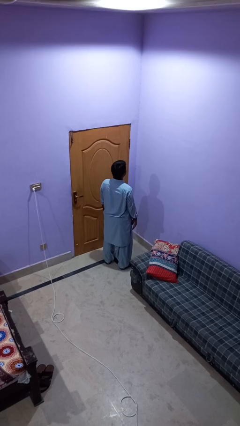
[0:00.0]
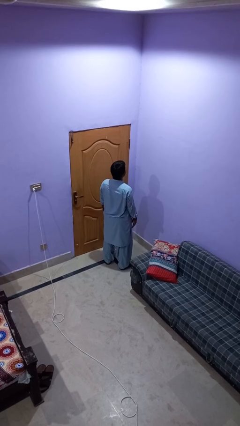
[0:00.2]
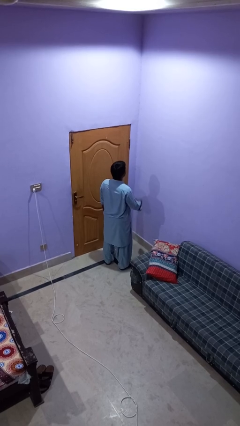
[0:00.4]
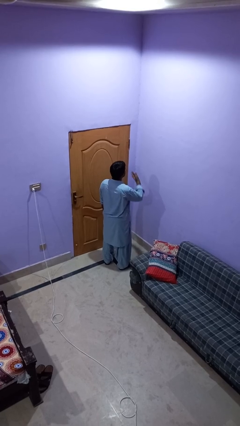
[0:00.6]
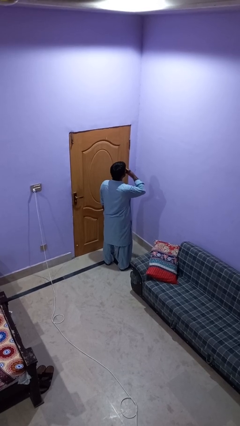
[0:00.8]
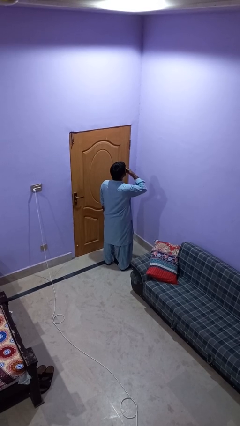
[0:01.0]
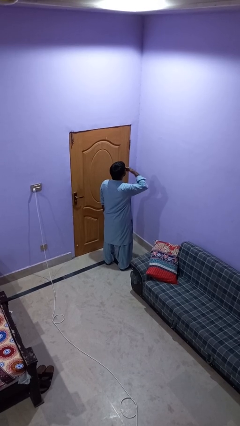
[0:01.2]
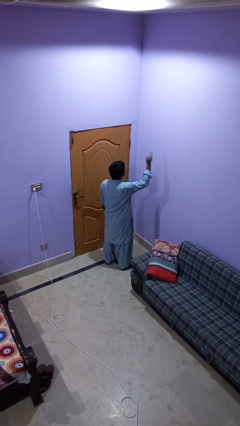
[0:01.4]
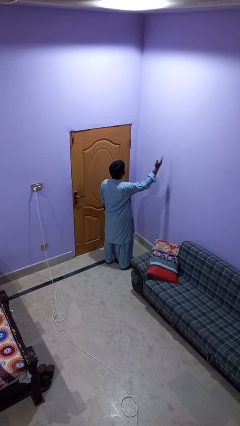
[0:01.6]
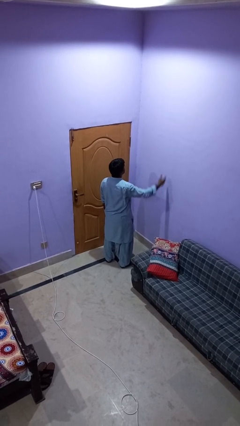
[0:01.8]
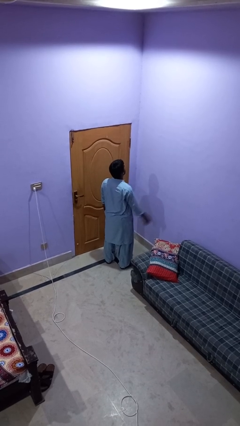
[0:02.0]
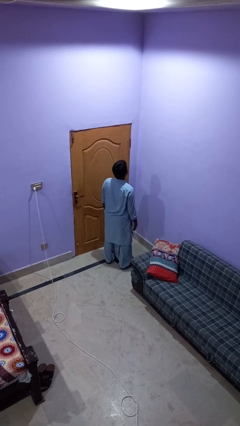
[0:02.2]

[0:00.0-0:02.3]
person gestures blow kiss

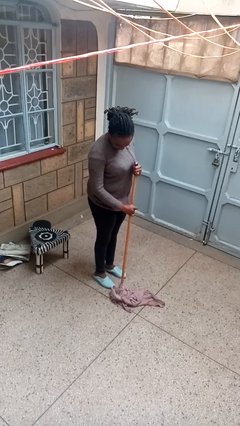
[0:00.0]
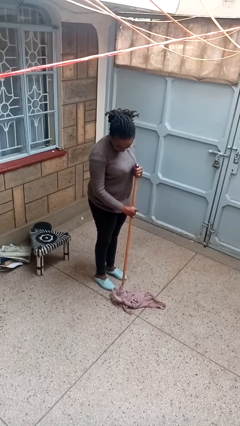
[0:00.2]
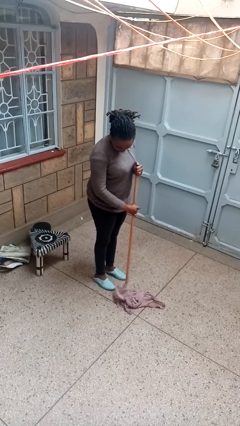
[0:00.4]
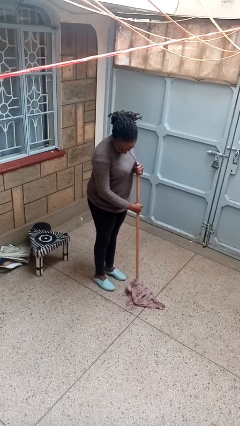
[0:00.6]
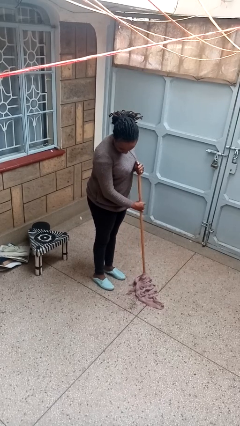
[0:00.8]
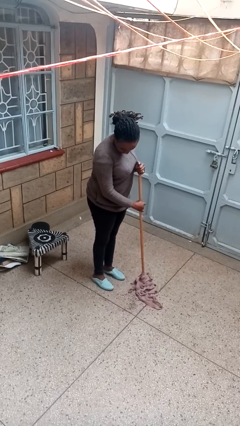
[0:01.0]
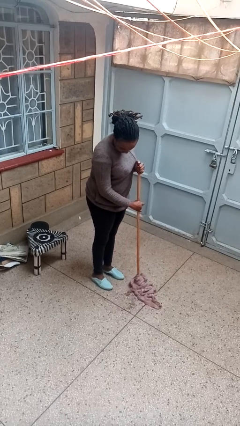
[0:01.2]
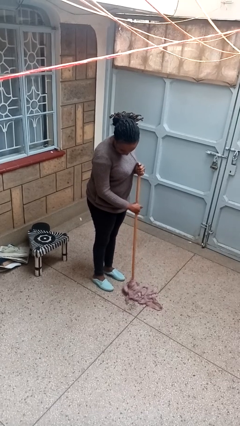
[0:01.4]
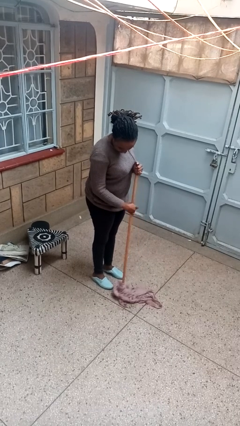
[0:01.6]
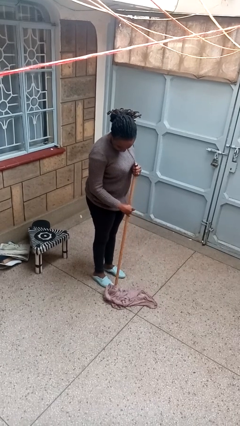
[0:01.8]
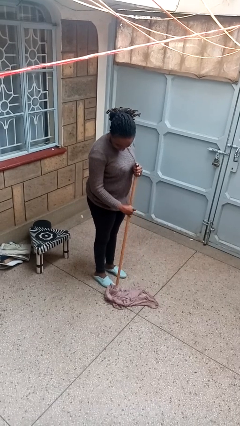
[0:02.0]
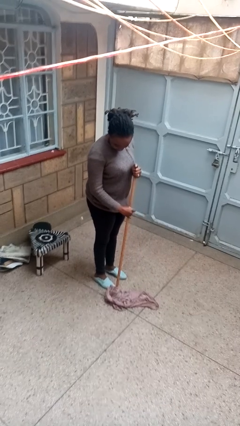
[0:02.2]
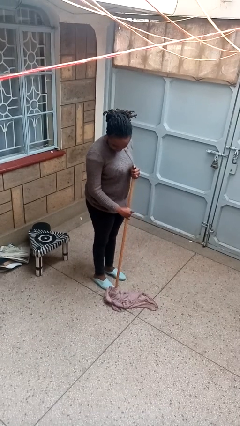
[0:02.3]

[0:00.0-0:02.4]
person mops

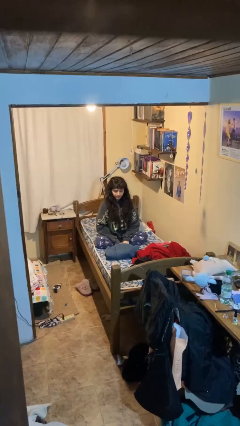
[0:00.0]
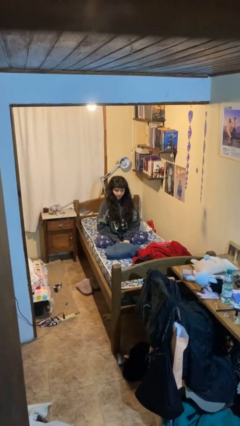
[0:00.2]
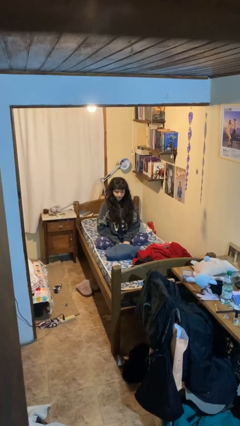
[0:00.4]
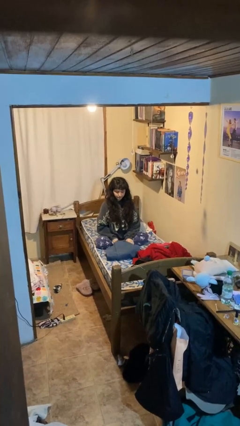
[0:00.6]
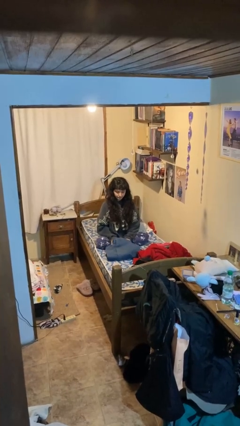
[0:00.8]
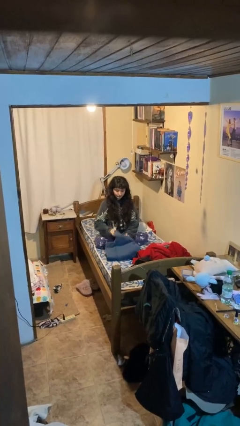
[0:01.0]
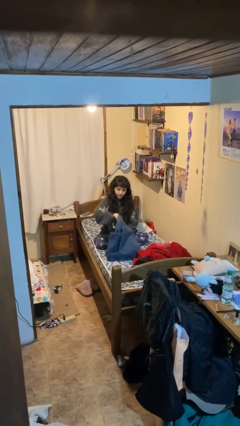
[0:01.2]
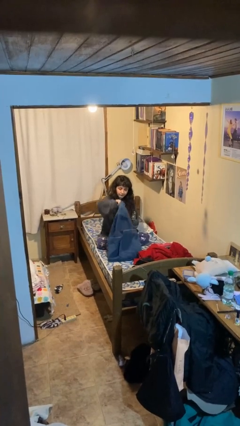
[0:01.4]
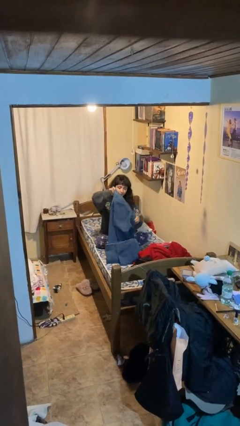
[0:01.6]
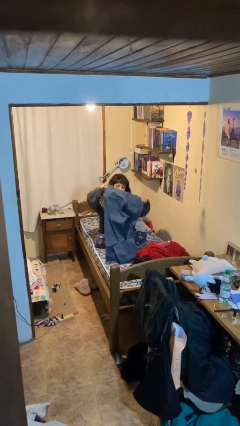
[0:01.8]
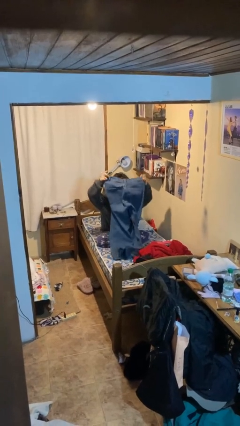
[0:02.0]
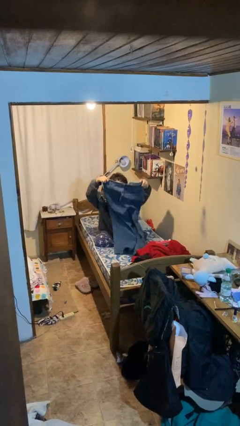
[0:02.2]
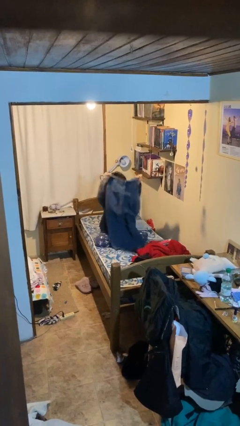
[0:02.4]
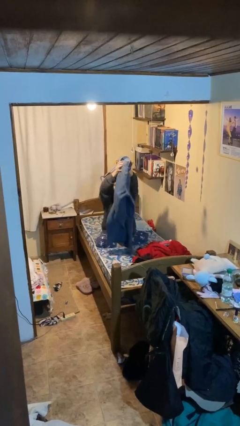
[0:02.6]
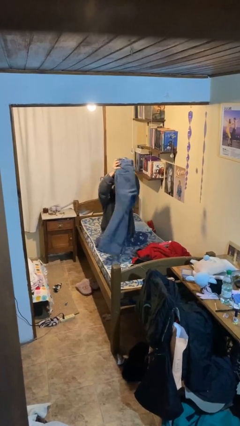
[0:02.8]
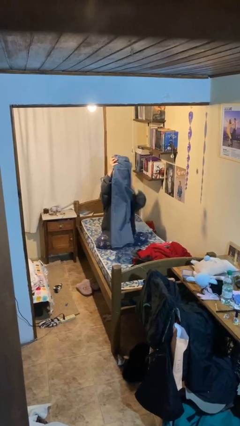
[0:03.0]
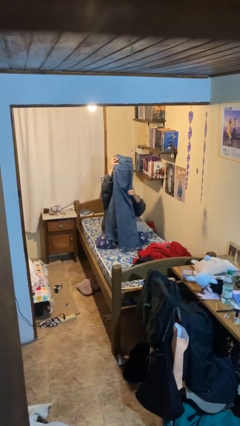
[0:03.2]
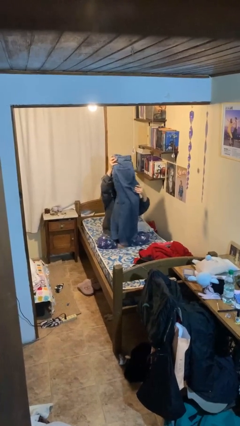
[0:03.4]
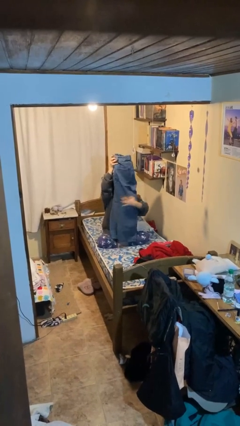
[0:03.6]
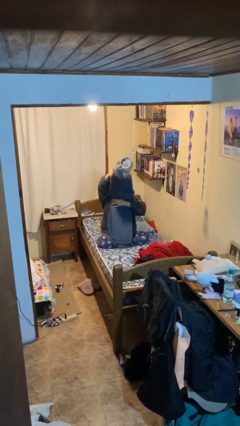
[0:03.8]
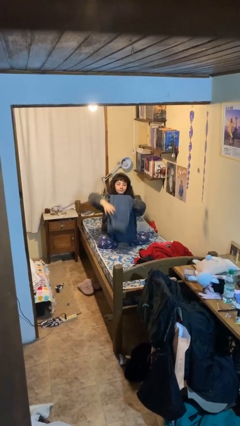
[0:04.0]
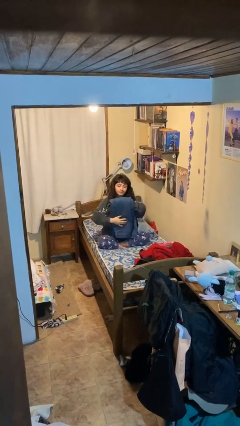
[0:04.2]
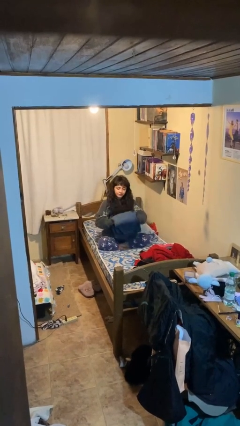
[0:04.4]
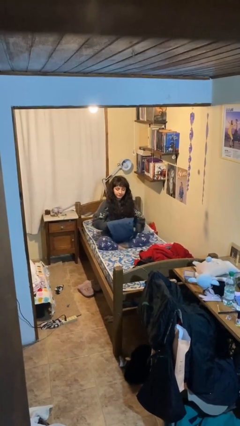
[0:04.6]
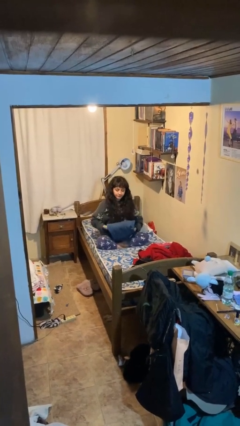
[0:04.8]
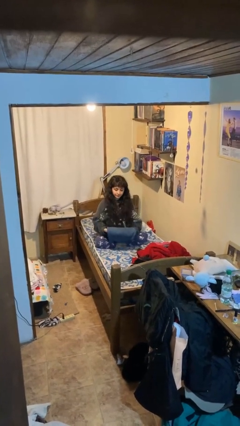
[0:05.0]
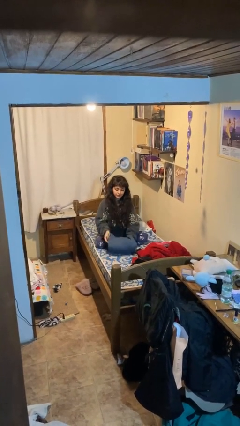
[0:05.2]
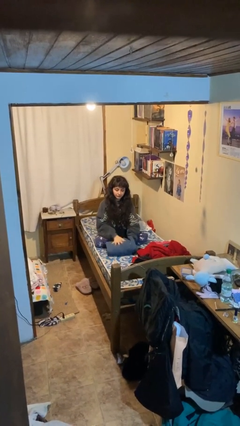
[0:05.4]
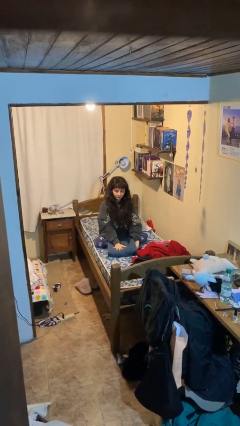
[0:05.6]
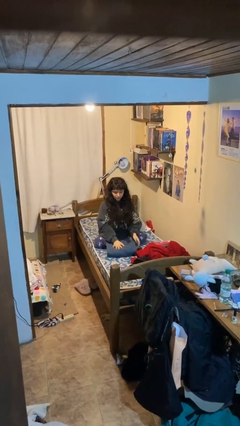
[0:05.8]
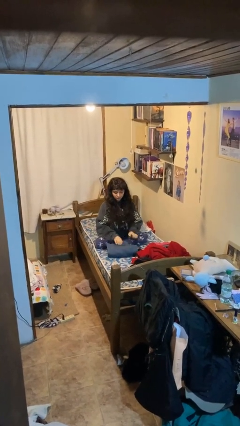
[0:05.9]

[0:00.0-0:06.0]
person folds pants

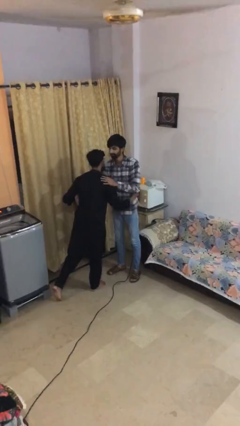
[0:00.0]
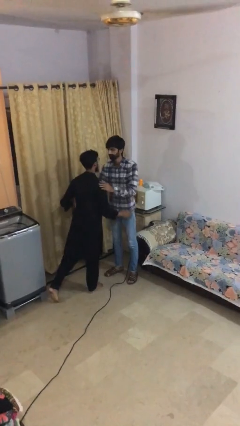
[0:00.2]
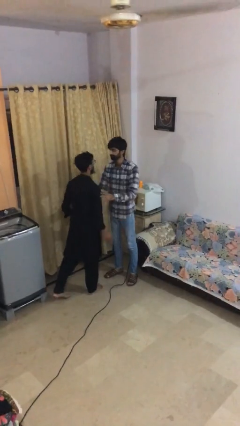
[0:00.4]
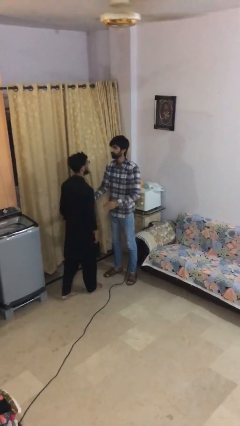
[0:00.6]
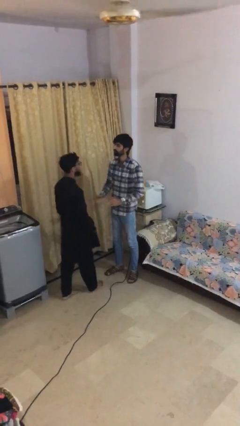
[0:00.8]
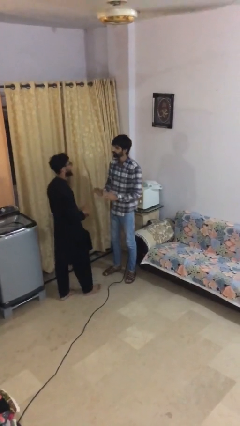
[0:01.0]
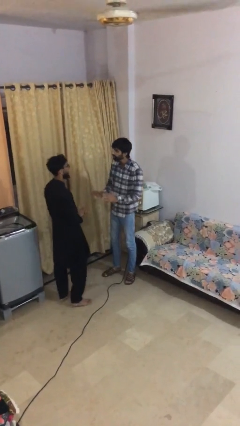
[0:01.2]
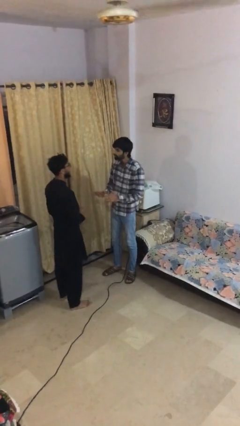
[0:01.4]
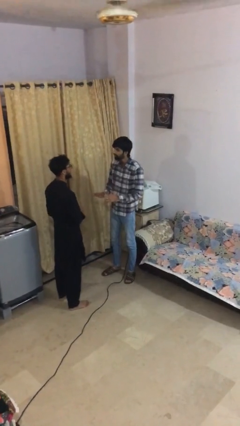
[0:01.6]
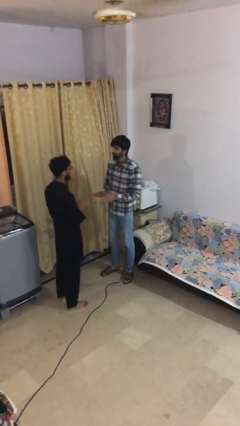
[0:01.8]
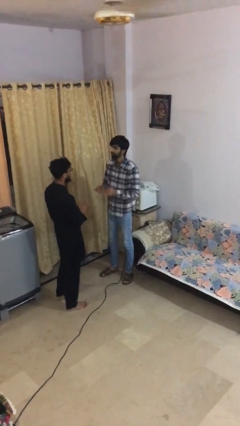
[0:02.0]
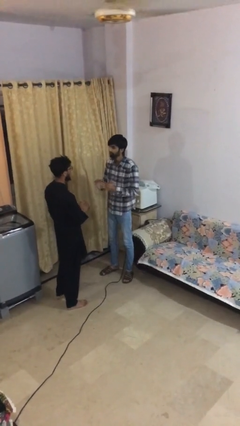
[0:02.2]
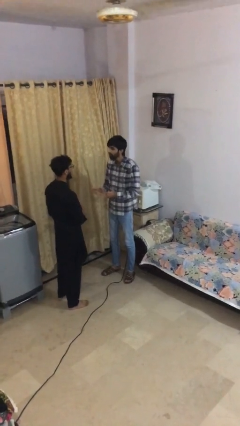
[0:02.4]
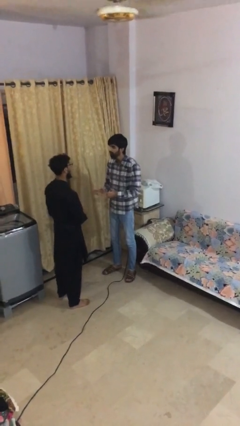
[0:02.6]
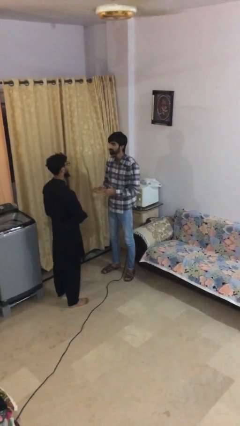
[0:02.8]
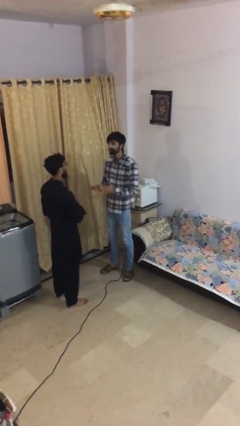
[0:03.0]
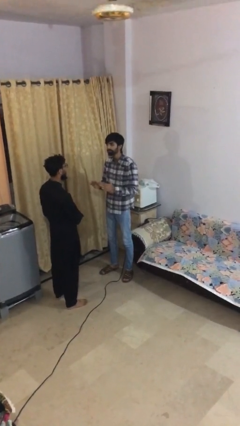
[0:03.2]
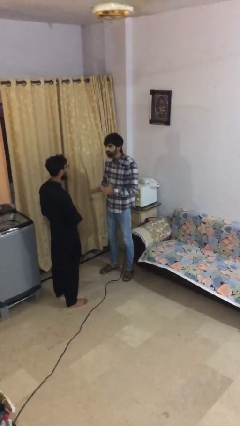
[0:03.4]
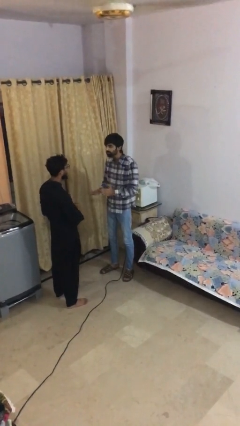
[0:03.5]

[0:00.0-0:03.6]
person talks to person

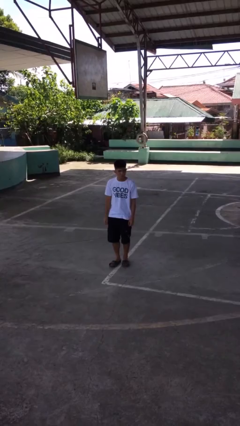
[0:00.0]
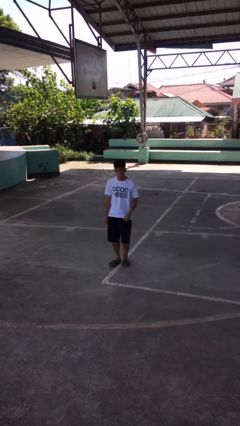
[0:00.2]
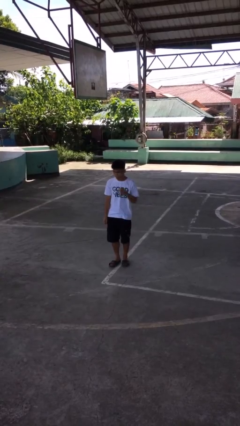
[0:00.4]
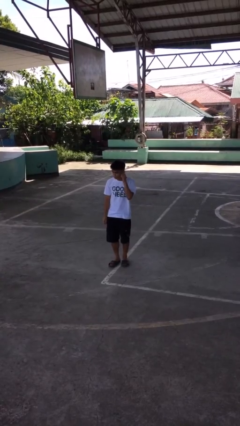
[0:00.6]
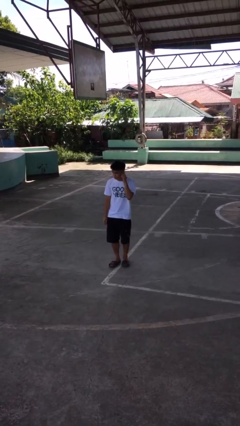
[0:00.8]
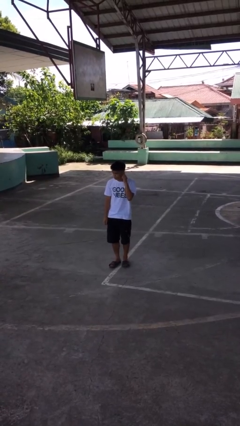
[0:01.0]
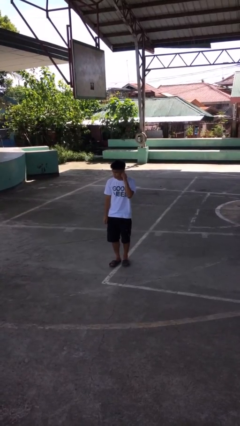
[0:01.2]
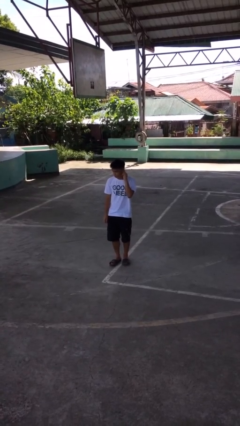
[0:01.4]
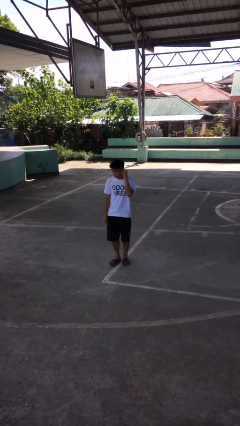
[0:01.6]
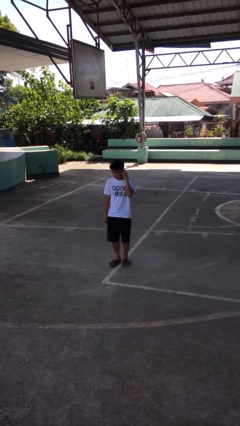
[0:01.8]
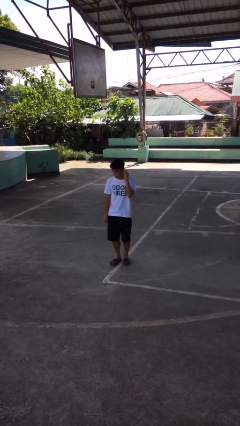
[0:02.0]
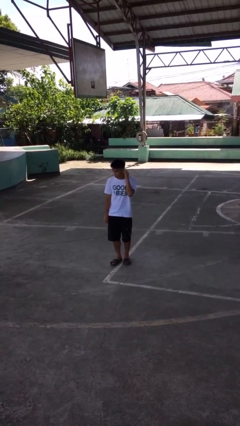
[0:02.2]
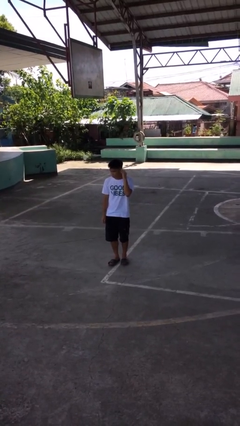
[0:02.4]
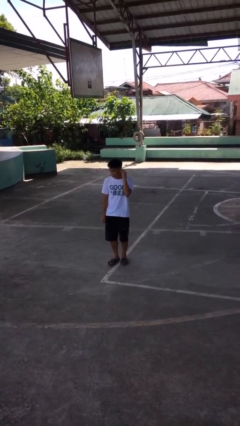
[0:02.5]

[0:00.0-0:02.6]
person touches earlobe

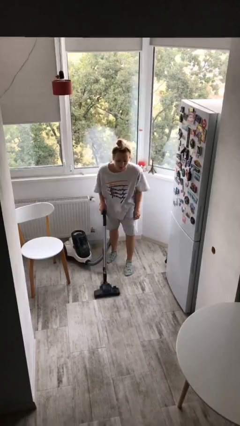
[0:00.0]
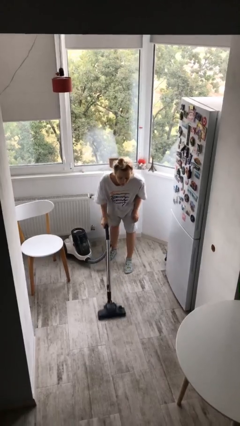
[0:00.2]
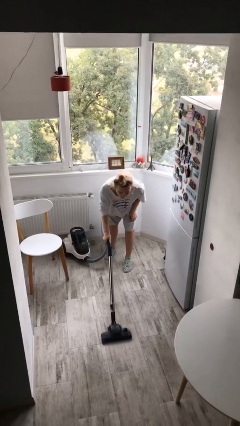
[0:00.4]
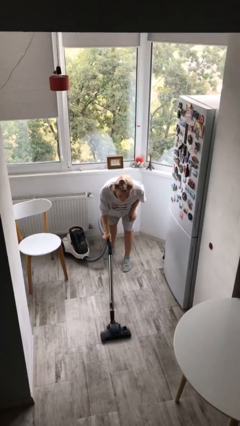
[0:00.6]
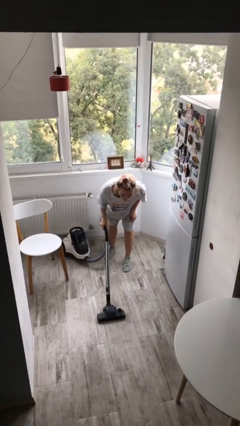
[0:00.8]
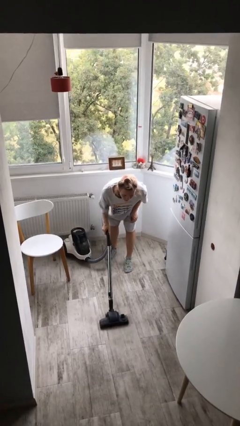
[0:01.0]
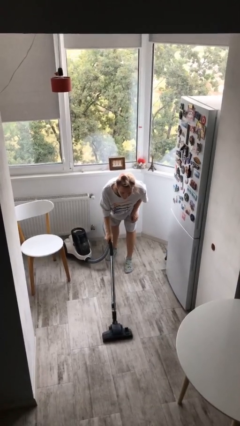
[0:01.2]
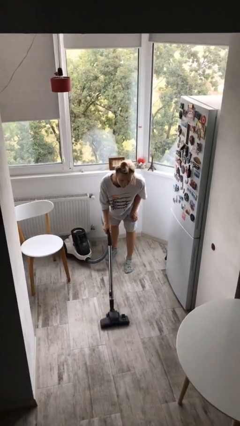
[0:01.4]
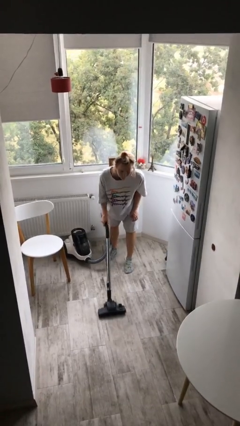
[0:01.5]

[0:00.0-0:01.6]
person vacuums carpet
